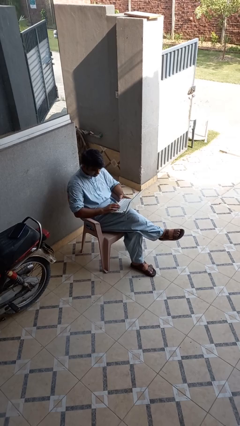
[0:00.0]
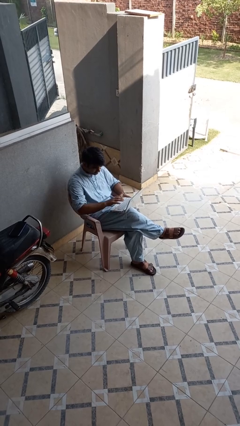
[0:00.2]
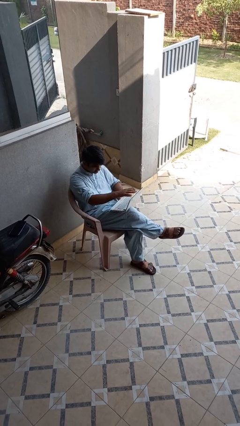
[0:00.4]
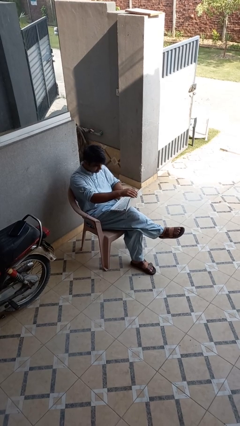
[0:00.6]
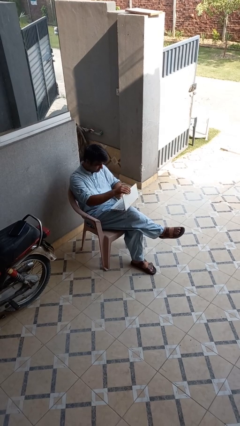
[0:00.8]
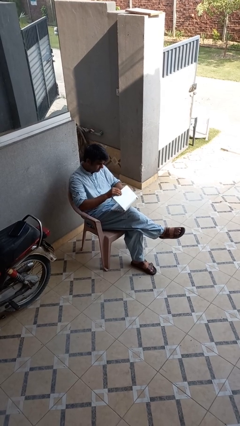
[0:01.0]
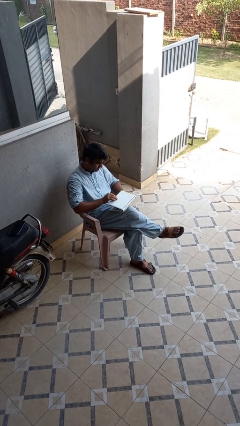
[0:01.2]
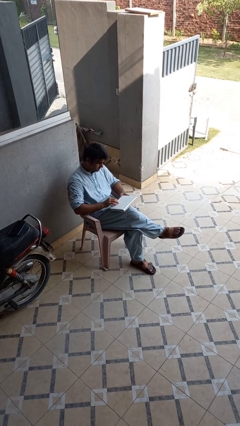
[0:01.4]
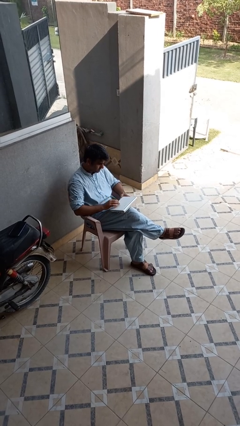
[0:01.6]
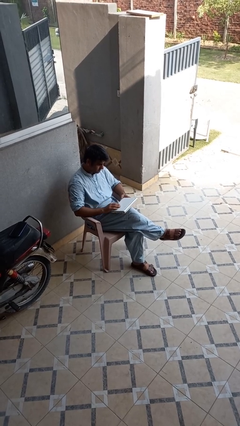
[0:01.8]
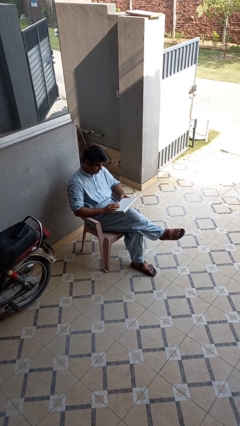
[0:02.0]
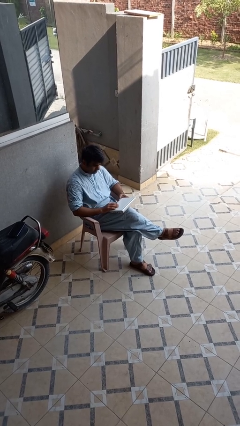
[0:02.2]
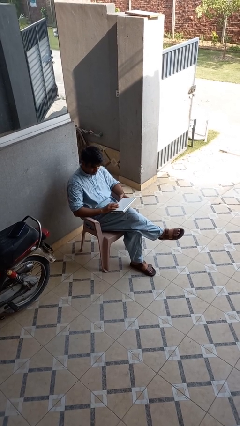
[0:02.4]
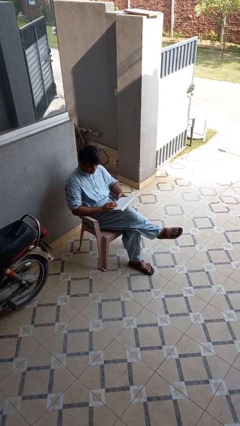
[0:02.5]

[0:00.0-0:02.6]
person closes laptop

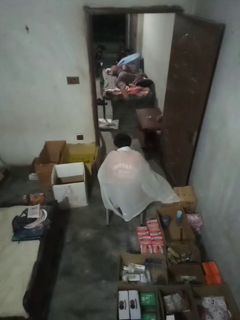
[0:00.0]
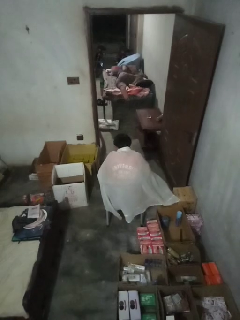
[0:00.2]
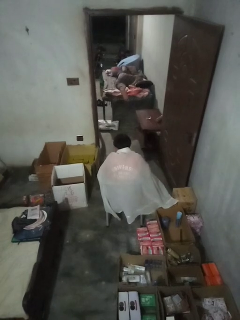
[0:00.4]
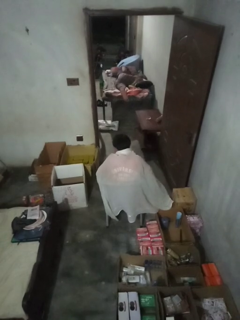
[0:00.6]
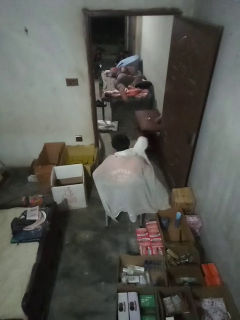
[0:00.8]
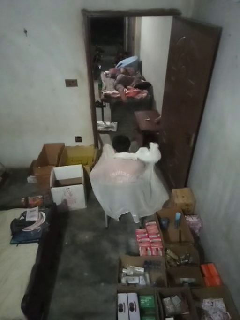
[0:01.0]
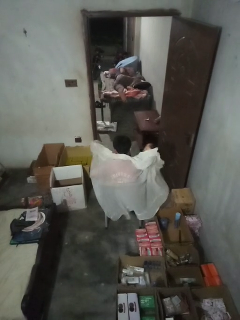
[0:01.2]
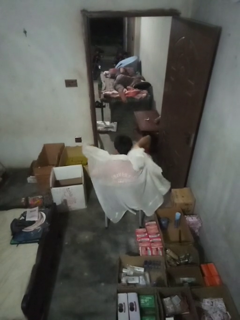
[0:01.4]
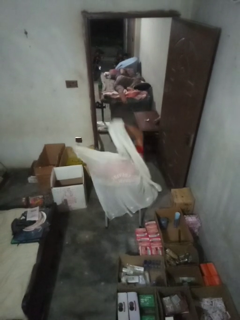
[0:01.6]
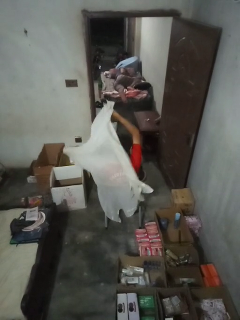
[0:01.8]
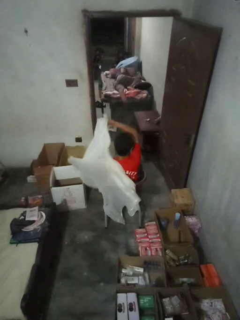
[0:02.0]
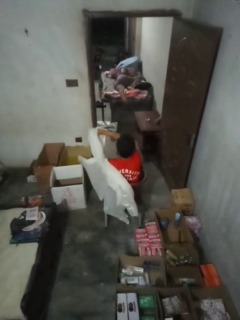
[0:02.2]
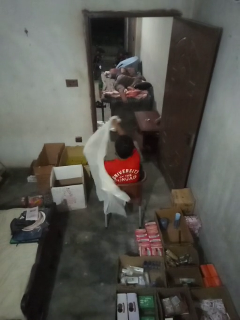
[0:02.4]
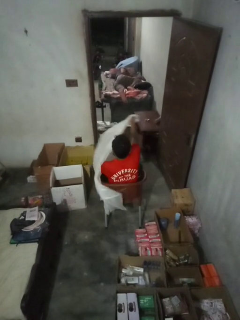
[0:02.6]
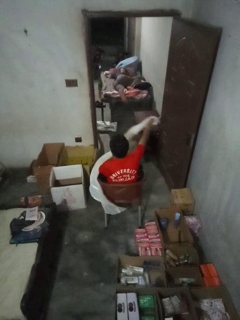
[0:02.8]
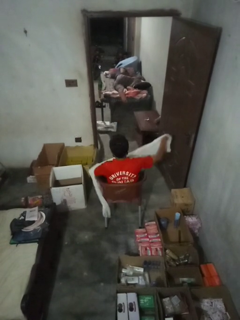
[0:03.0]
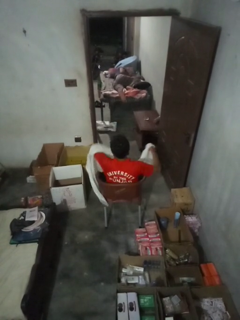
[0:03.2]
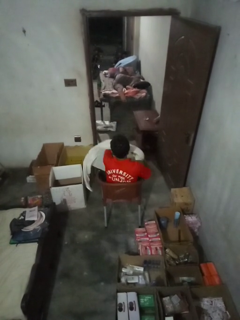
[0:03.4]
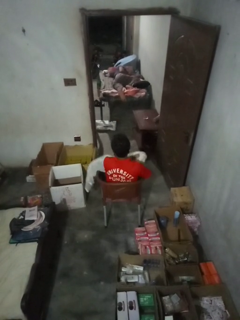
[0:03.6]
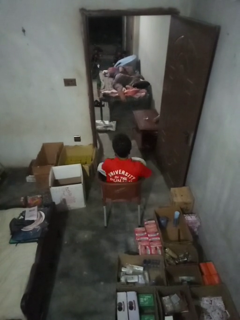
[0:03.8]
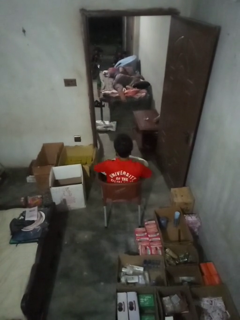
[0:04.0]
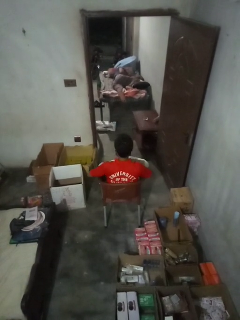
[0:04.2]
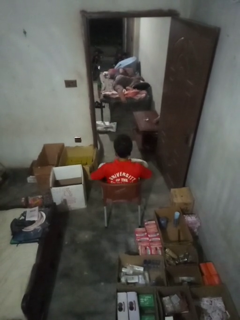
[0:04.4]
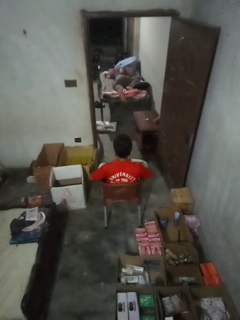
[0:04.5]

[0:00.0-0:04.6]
person uncovers with blanket

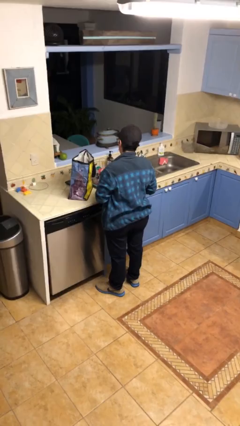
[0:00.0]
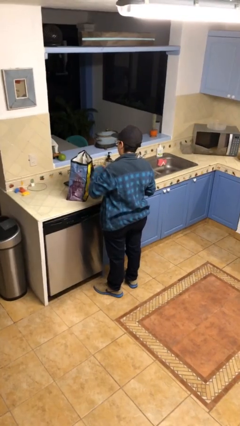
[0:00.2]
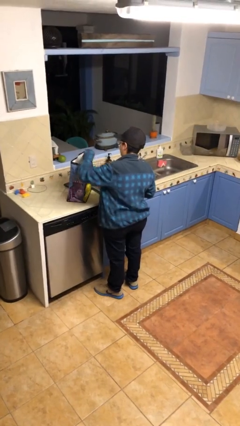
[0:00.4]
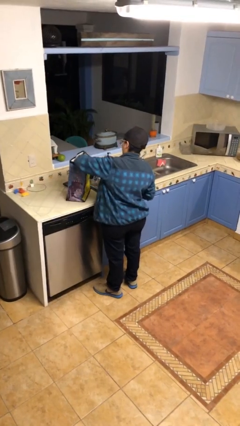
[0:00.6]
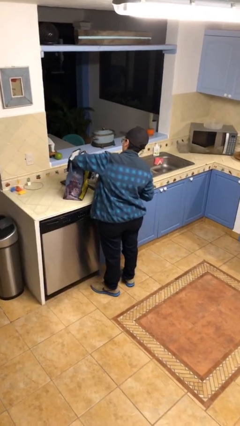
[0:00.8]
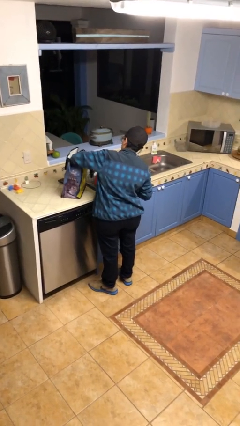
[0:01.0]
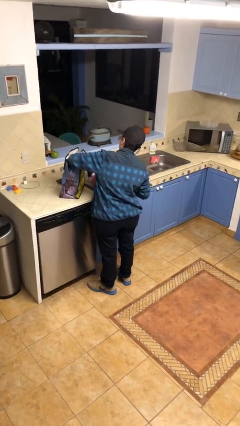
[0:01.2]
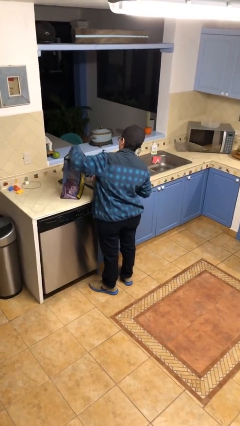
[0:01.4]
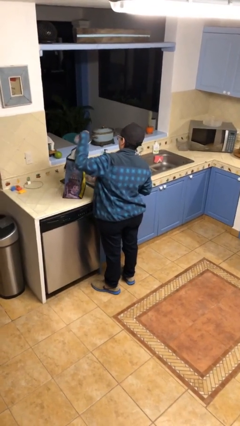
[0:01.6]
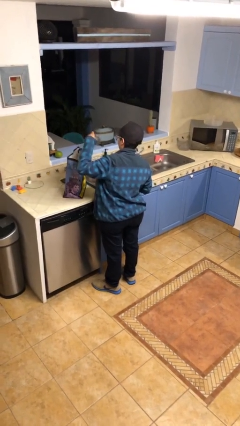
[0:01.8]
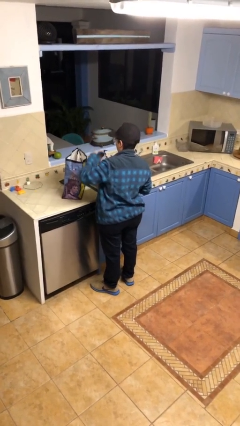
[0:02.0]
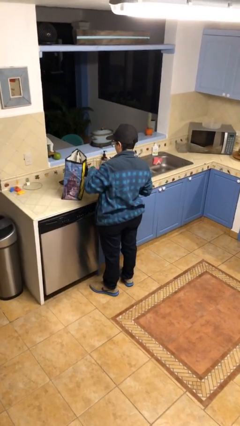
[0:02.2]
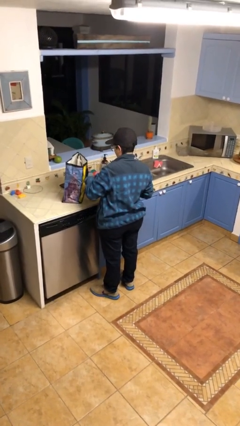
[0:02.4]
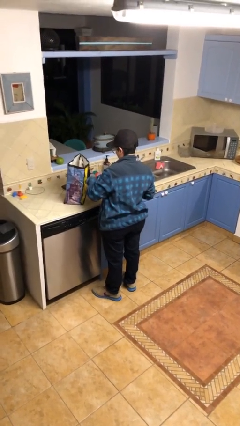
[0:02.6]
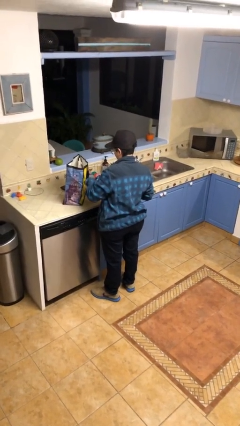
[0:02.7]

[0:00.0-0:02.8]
person takes object from bag

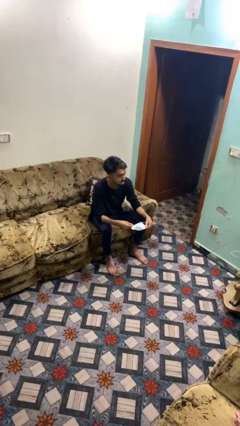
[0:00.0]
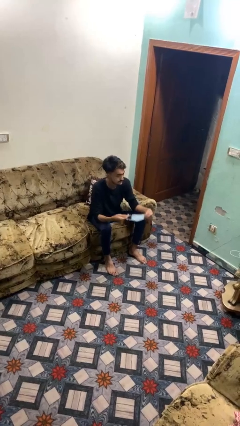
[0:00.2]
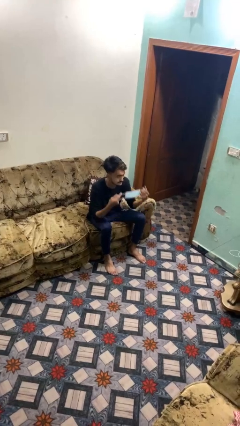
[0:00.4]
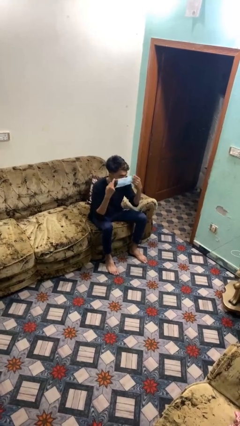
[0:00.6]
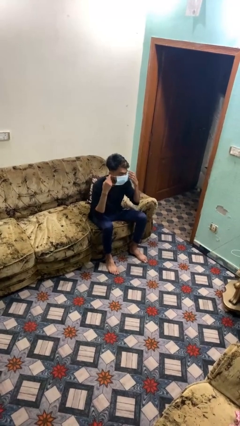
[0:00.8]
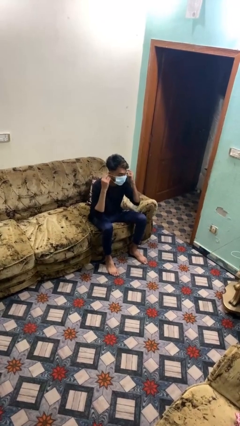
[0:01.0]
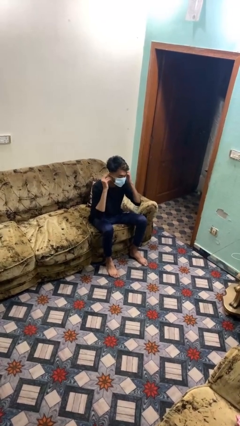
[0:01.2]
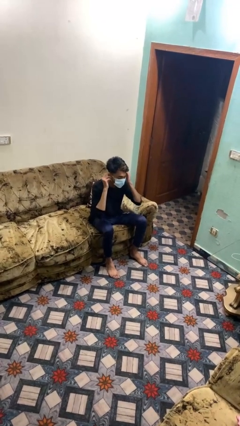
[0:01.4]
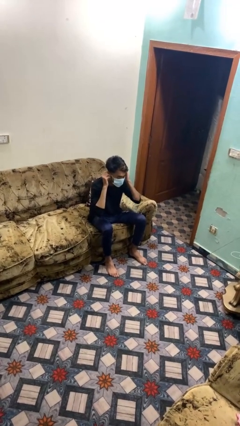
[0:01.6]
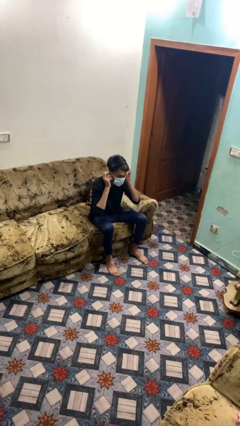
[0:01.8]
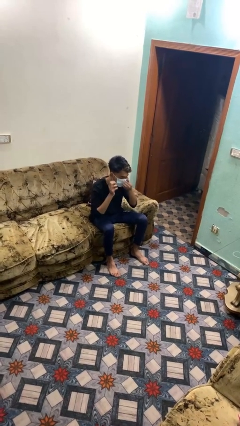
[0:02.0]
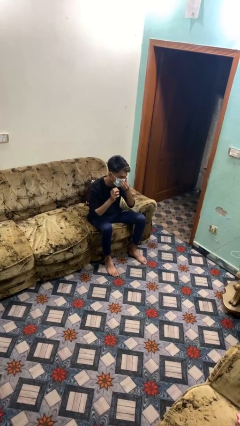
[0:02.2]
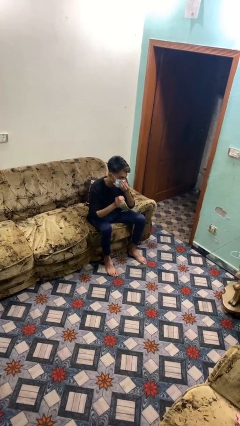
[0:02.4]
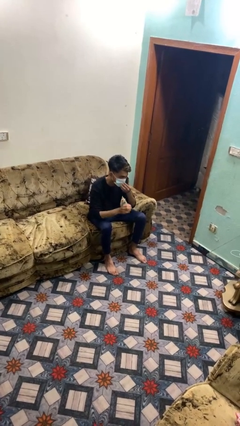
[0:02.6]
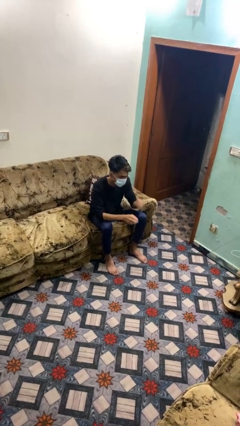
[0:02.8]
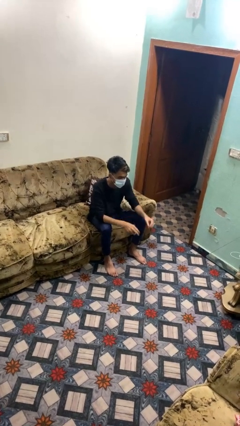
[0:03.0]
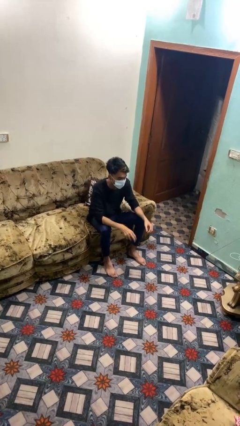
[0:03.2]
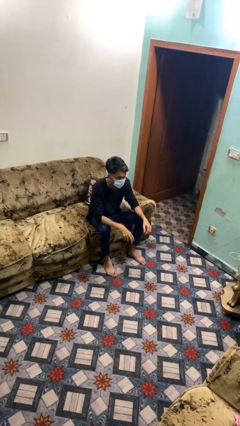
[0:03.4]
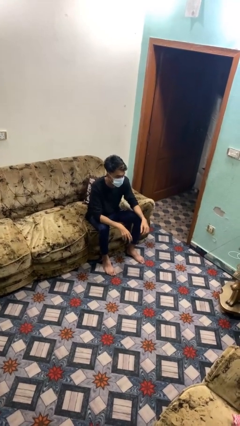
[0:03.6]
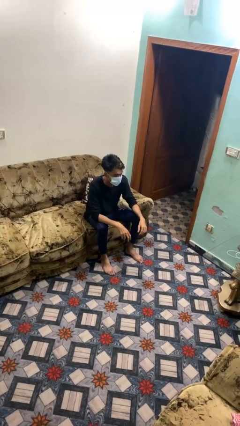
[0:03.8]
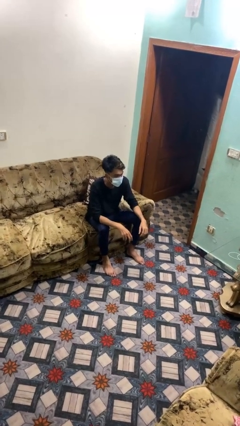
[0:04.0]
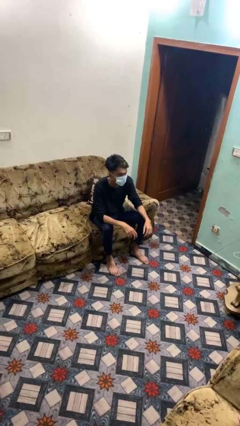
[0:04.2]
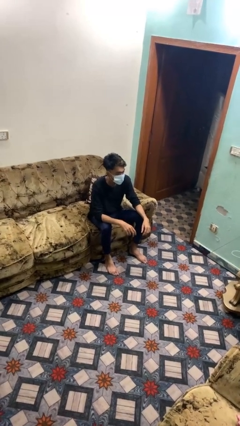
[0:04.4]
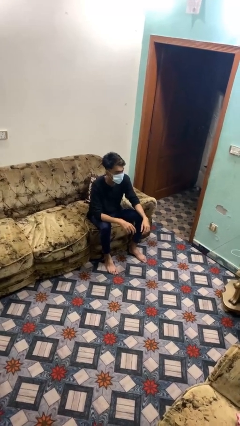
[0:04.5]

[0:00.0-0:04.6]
person puts on facemask

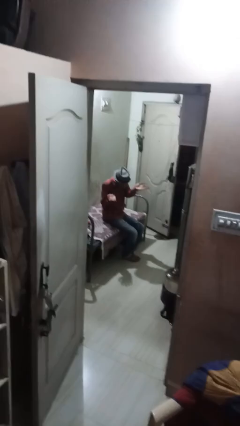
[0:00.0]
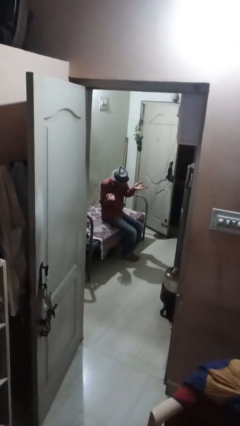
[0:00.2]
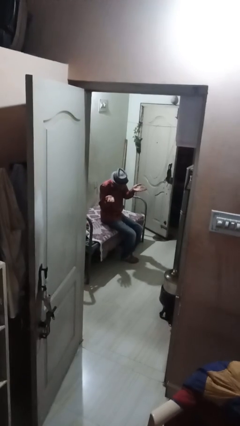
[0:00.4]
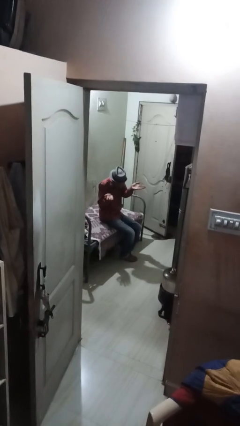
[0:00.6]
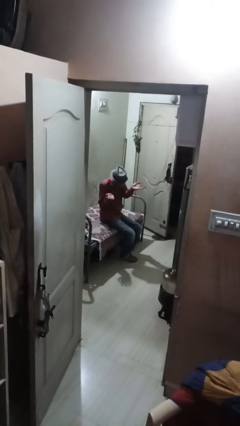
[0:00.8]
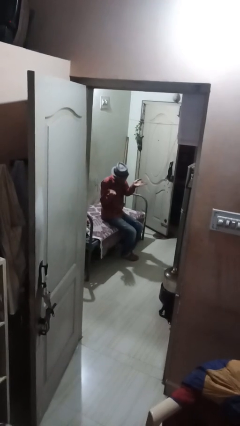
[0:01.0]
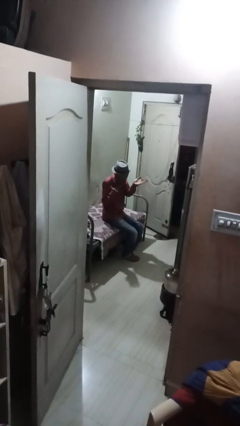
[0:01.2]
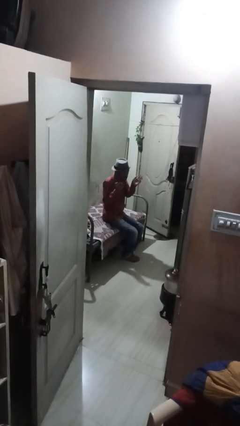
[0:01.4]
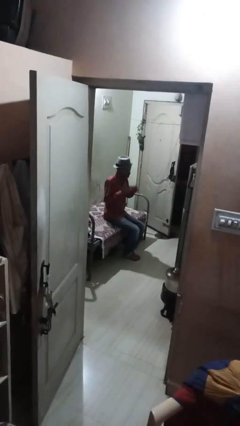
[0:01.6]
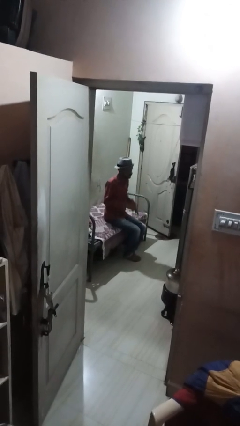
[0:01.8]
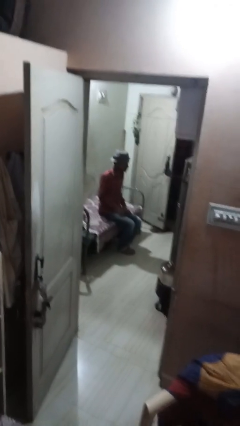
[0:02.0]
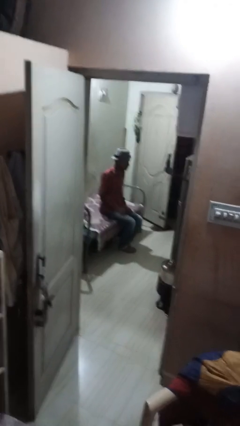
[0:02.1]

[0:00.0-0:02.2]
person shrugs

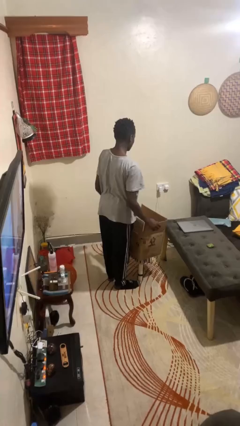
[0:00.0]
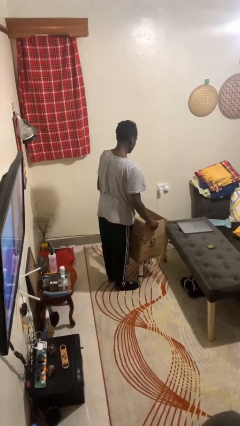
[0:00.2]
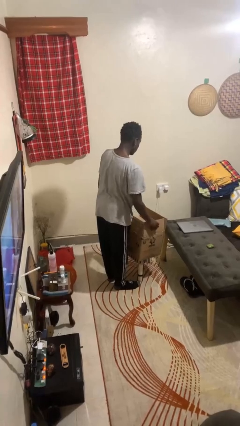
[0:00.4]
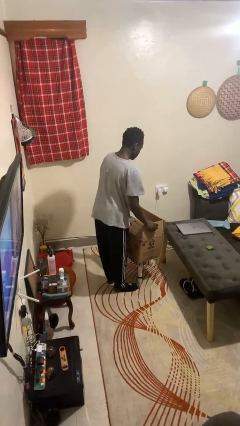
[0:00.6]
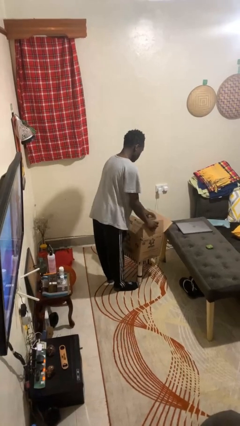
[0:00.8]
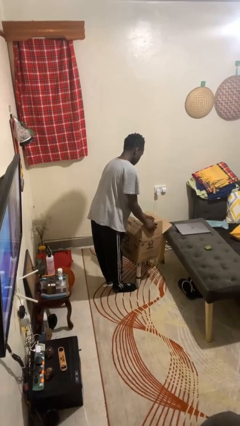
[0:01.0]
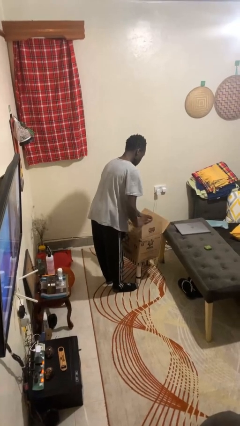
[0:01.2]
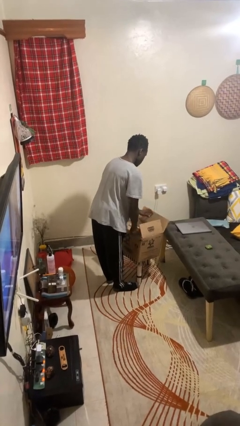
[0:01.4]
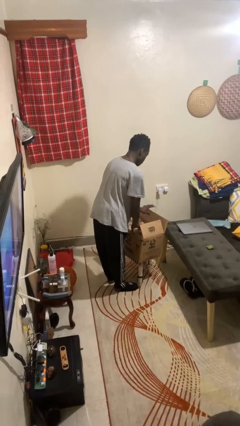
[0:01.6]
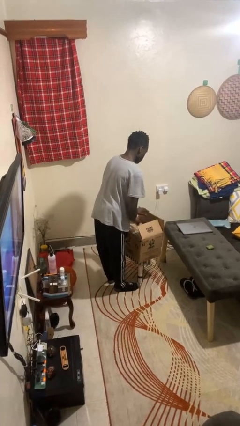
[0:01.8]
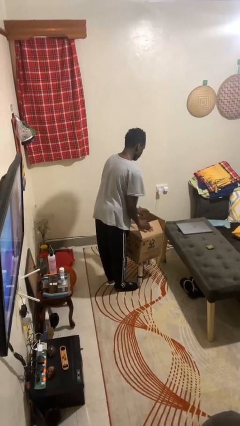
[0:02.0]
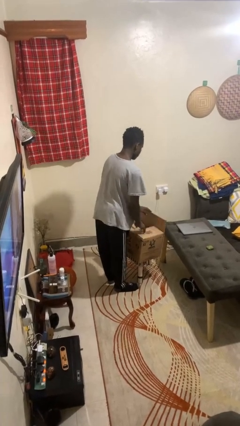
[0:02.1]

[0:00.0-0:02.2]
person closes box
